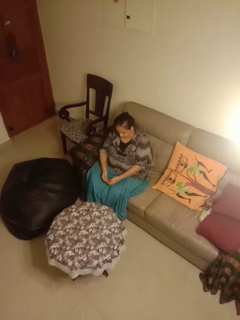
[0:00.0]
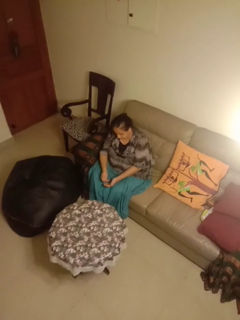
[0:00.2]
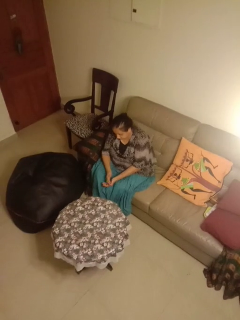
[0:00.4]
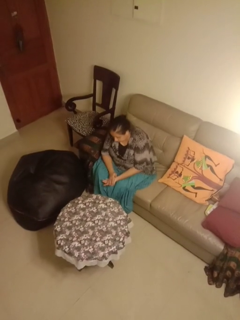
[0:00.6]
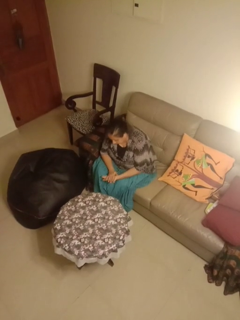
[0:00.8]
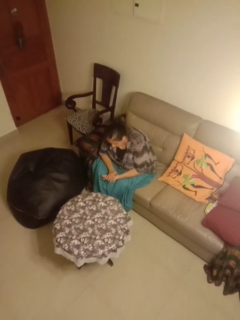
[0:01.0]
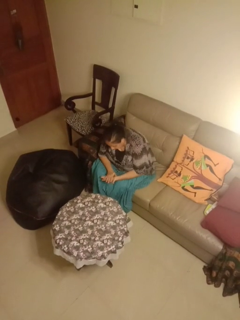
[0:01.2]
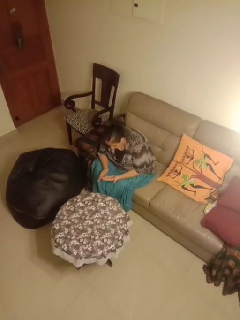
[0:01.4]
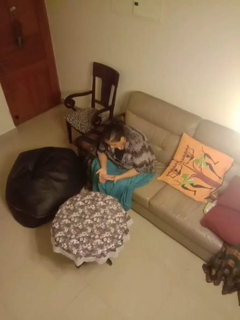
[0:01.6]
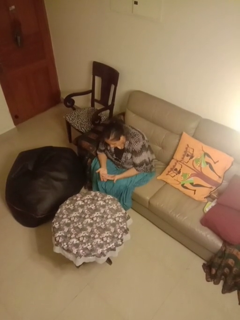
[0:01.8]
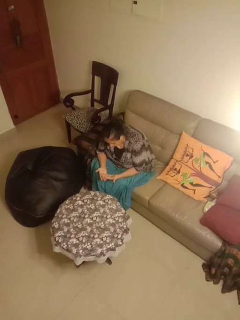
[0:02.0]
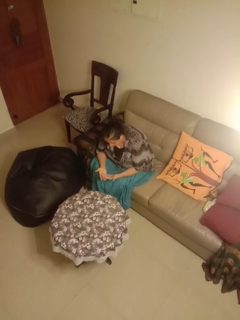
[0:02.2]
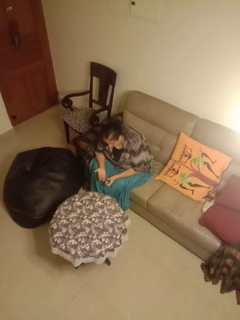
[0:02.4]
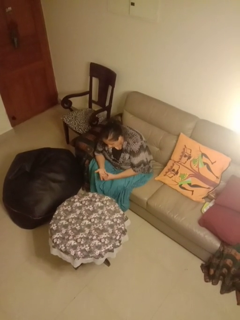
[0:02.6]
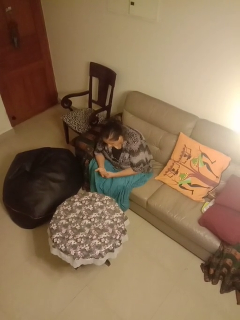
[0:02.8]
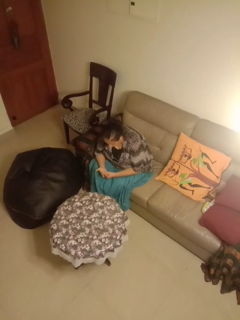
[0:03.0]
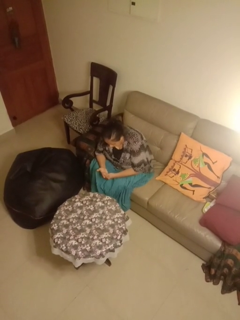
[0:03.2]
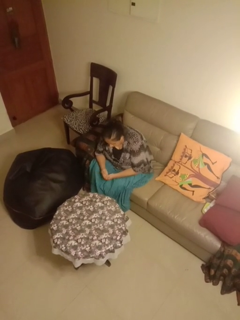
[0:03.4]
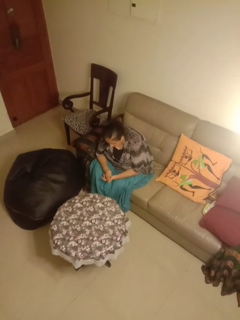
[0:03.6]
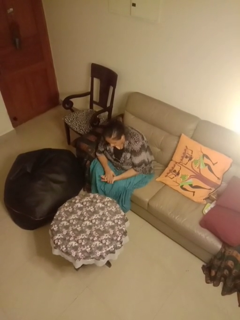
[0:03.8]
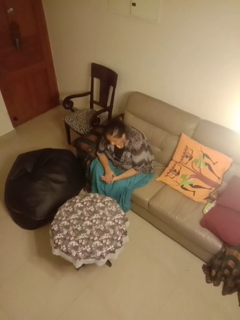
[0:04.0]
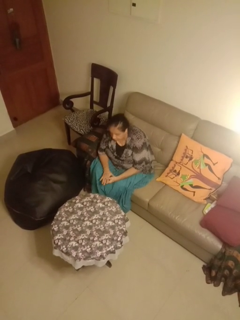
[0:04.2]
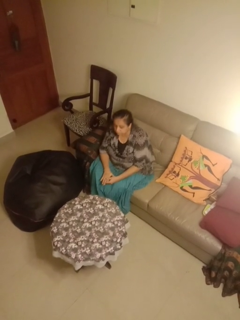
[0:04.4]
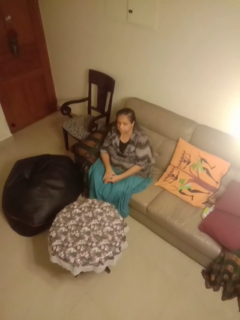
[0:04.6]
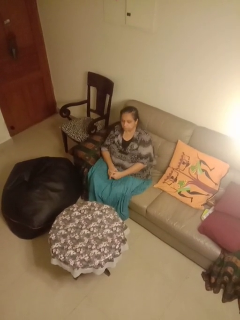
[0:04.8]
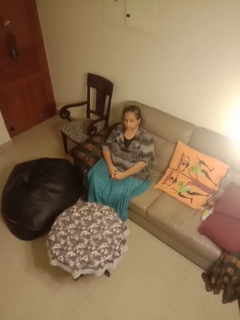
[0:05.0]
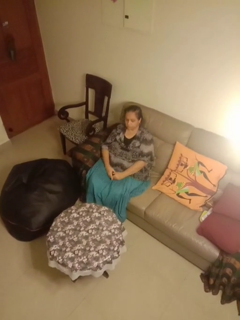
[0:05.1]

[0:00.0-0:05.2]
person looks at hands in lap

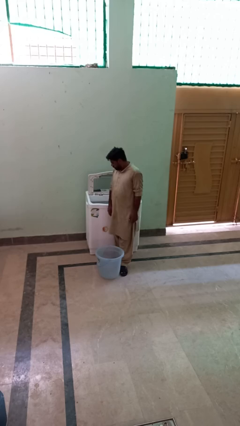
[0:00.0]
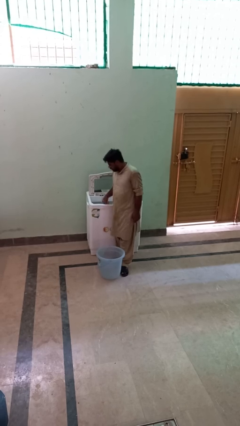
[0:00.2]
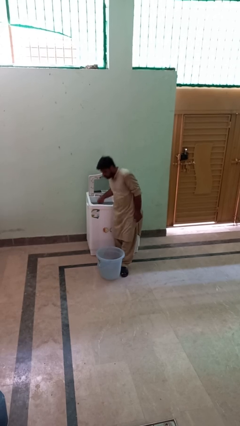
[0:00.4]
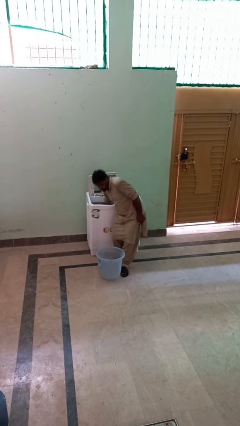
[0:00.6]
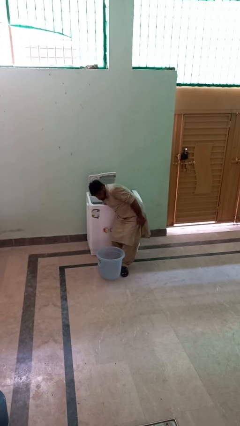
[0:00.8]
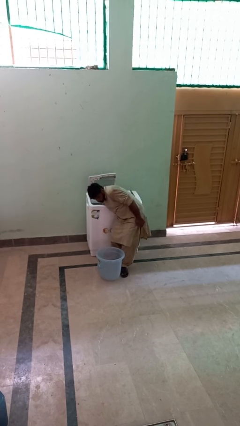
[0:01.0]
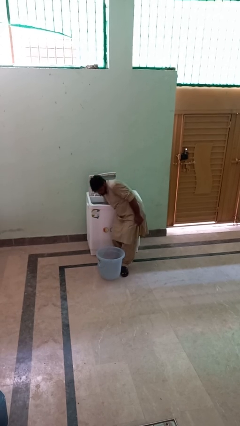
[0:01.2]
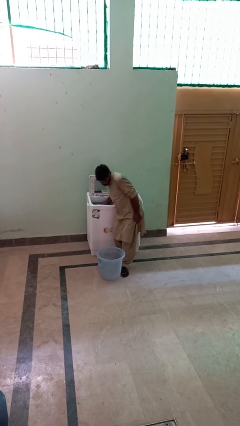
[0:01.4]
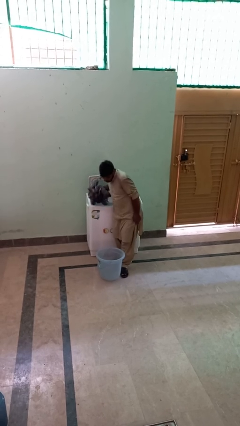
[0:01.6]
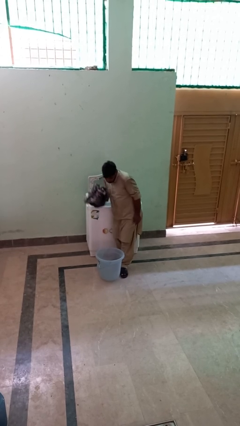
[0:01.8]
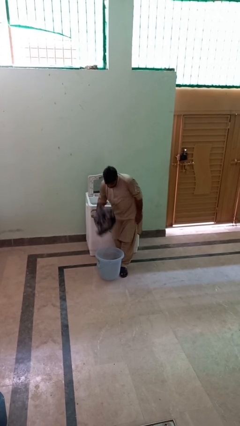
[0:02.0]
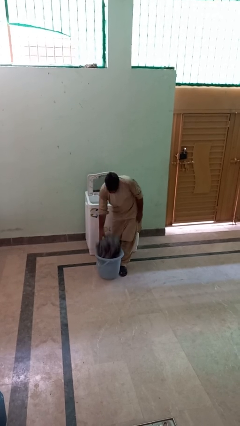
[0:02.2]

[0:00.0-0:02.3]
person unloads clotheswasher

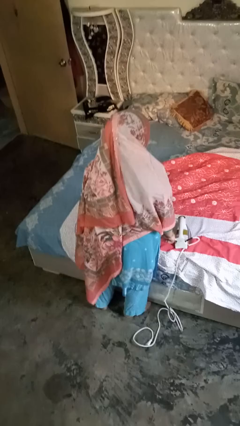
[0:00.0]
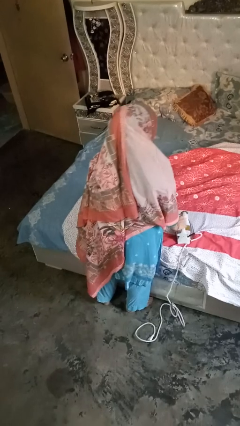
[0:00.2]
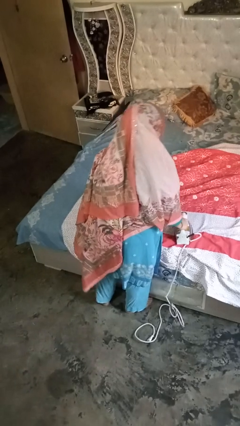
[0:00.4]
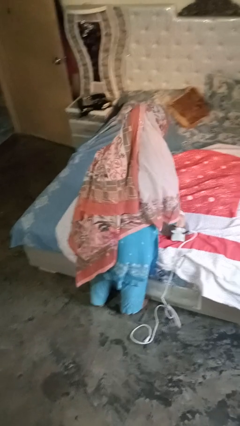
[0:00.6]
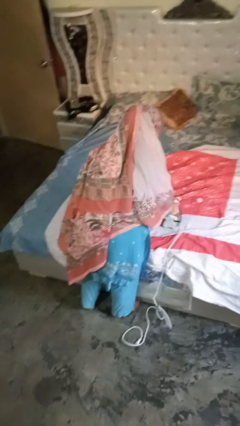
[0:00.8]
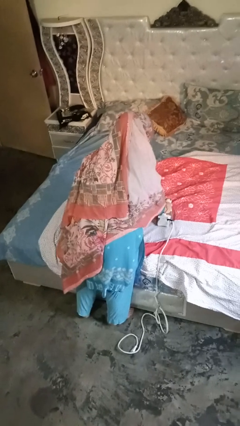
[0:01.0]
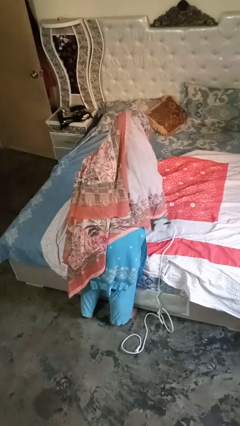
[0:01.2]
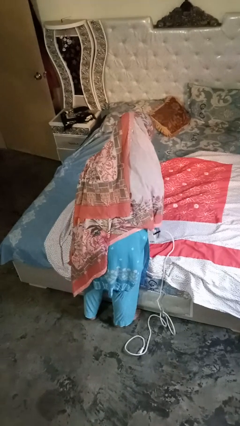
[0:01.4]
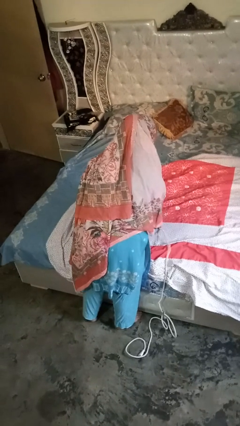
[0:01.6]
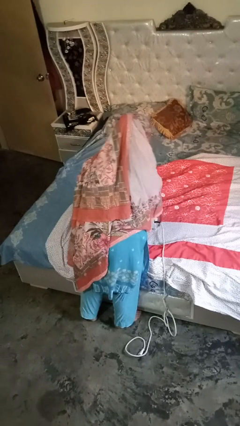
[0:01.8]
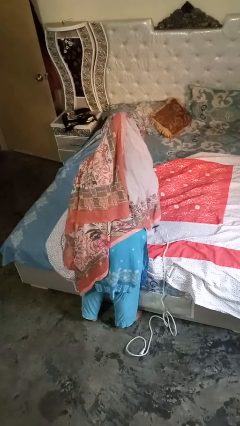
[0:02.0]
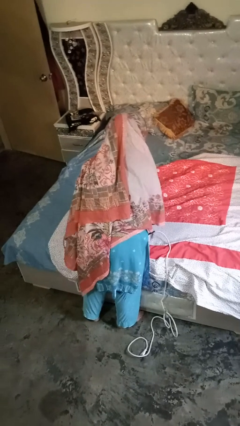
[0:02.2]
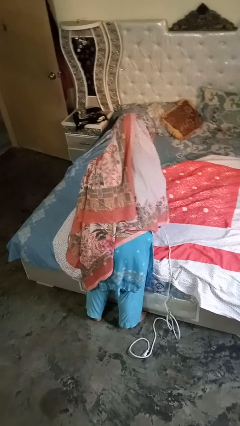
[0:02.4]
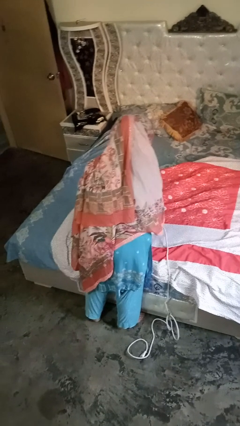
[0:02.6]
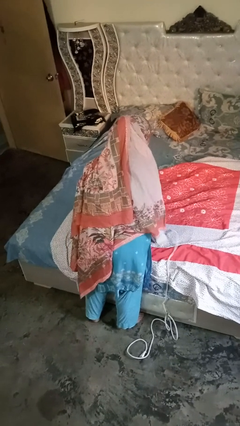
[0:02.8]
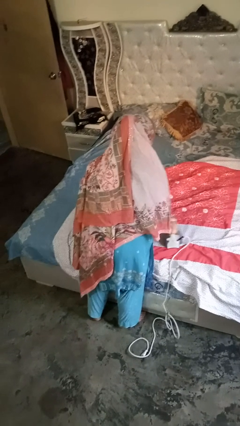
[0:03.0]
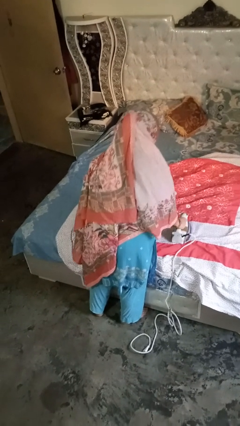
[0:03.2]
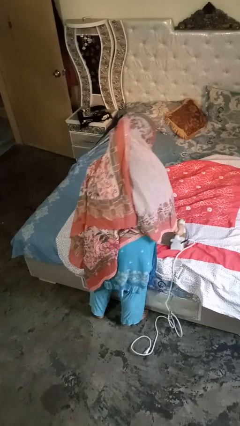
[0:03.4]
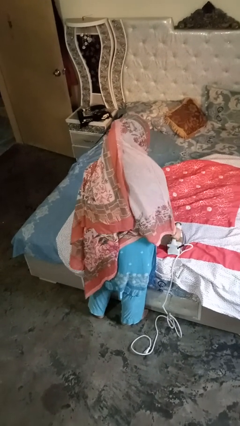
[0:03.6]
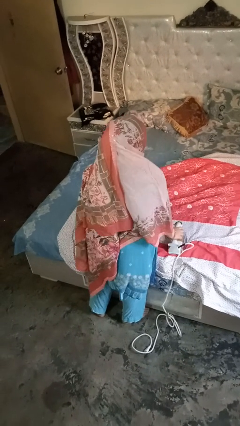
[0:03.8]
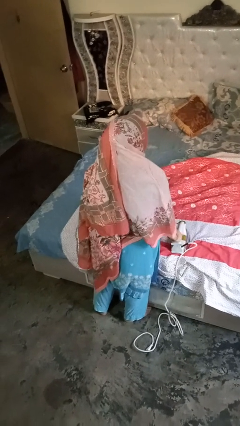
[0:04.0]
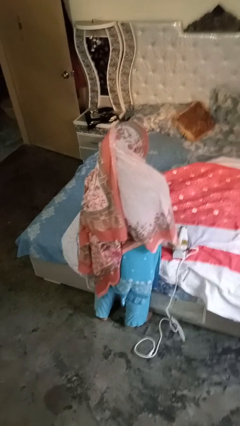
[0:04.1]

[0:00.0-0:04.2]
person irons clothes

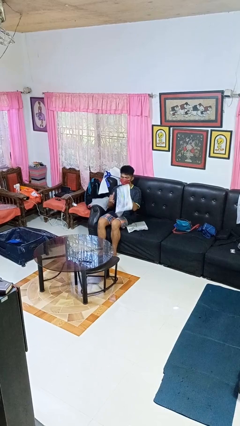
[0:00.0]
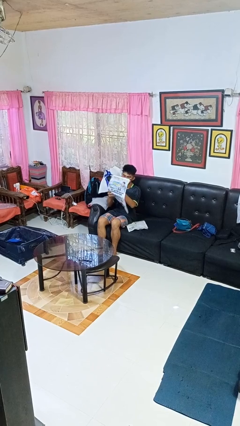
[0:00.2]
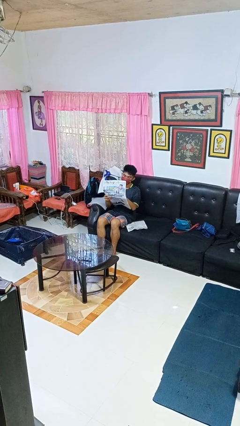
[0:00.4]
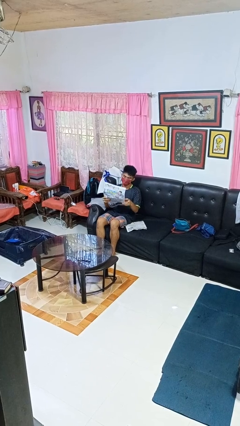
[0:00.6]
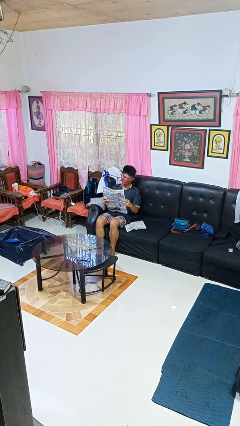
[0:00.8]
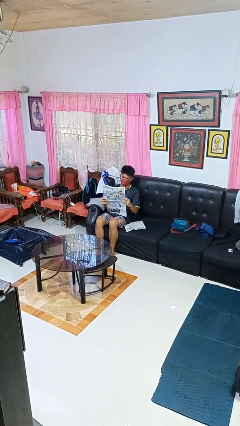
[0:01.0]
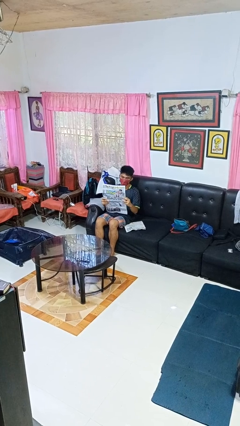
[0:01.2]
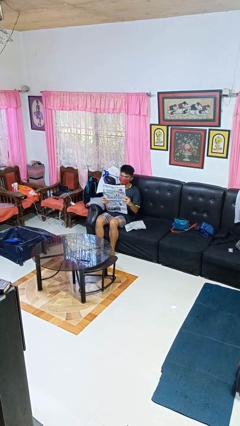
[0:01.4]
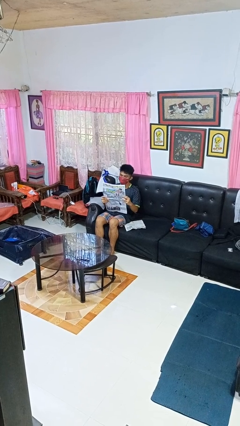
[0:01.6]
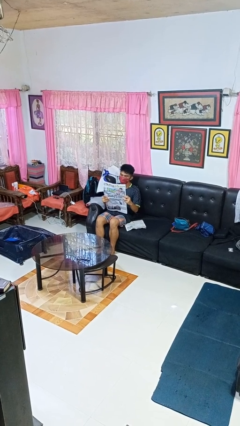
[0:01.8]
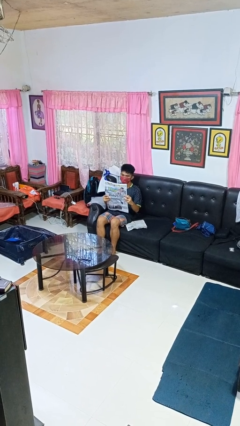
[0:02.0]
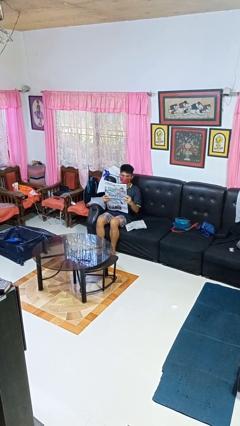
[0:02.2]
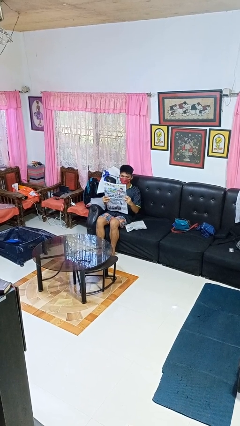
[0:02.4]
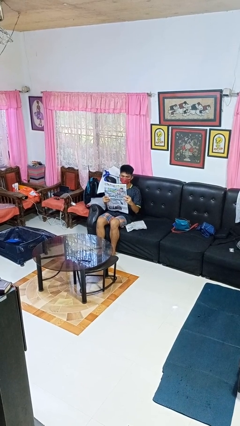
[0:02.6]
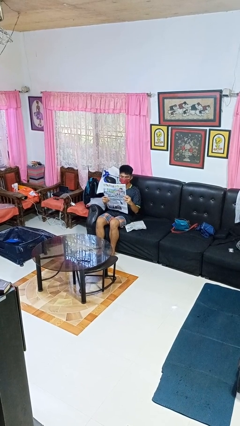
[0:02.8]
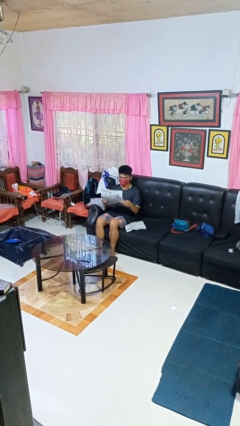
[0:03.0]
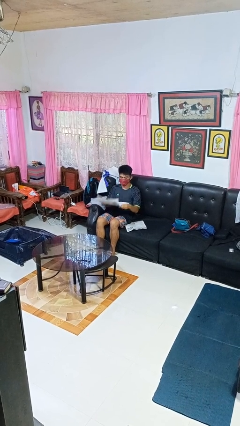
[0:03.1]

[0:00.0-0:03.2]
person reads newspaper

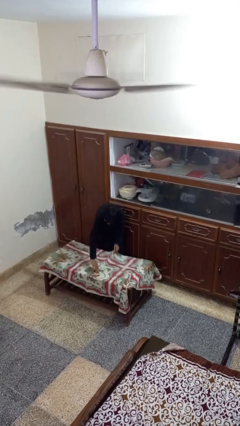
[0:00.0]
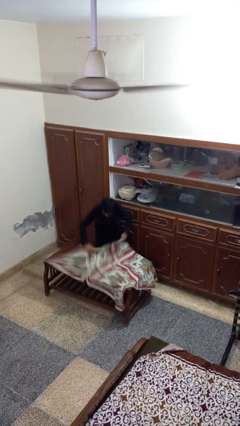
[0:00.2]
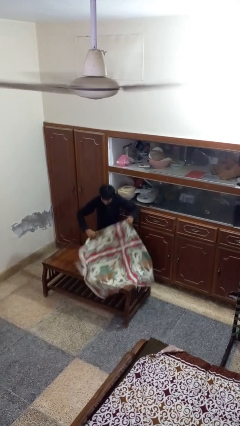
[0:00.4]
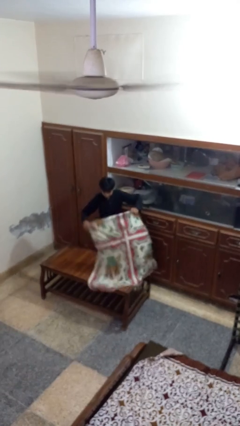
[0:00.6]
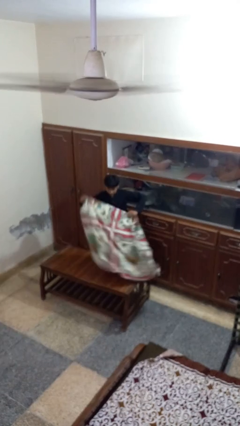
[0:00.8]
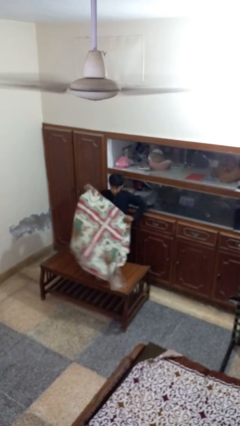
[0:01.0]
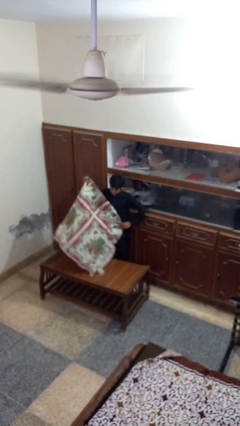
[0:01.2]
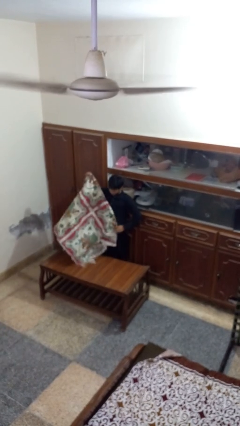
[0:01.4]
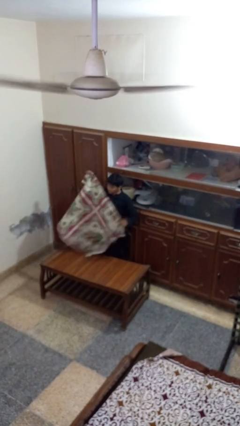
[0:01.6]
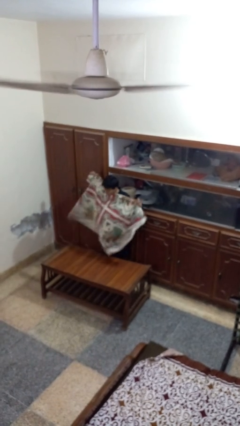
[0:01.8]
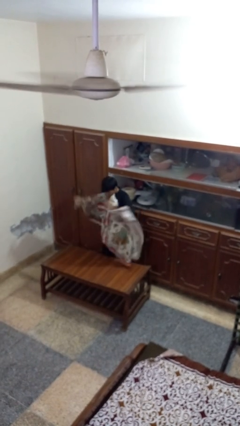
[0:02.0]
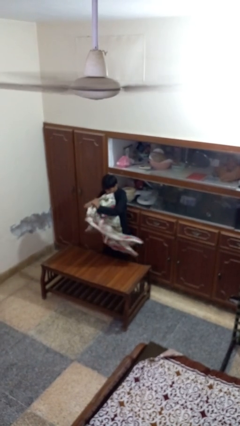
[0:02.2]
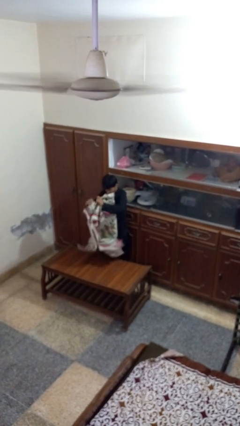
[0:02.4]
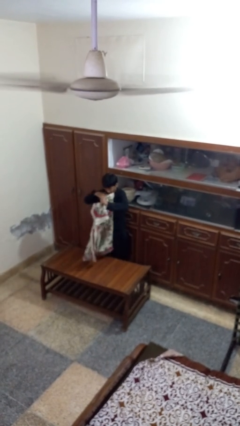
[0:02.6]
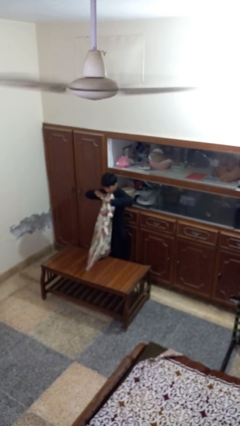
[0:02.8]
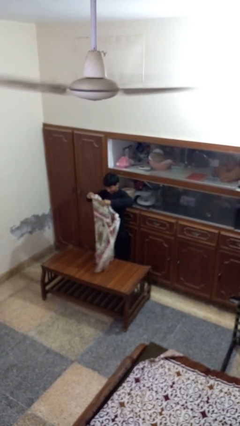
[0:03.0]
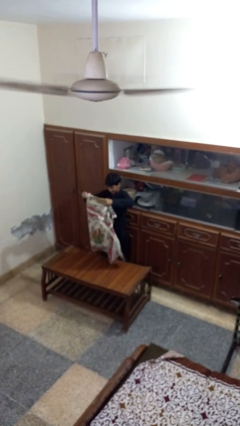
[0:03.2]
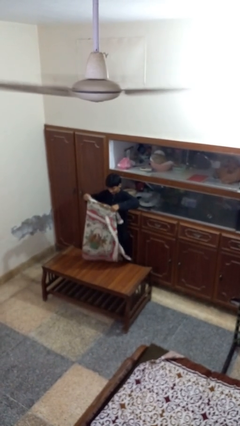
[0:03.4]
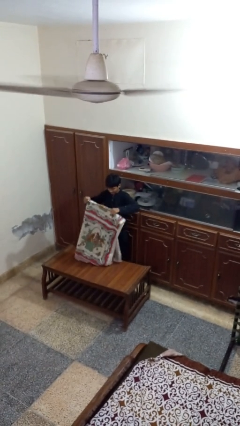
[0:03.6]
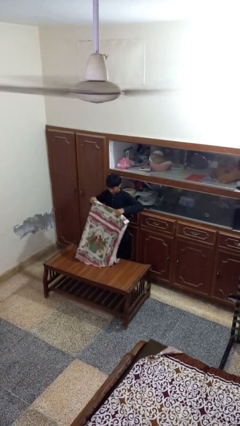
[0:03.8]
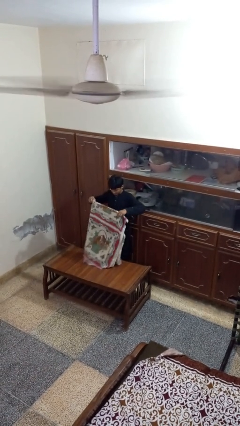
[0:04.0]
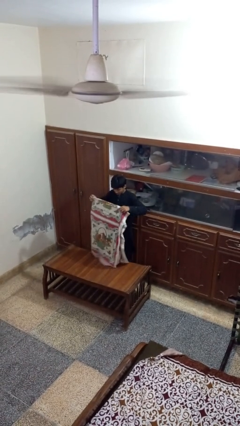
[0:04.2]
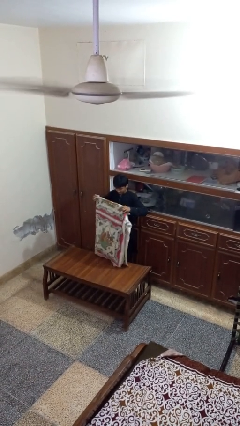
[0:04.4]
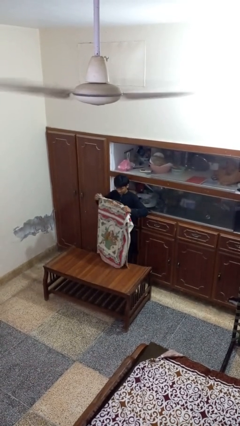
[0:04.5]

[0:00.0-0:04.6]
person folds tablecloth
